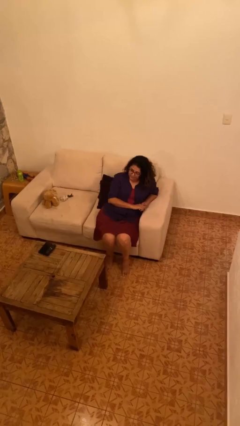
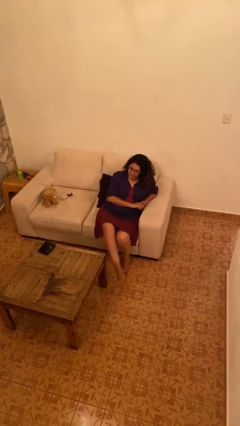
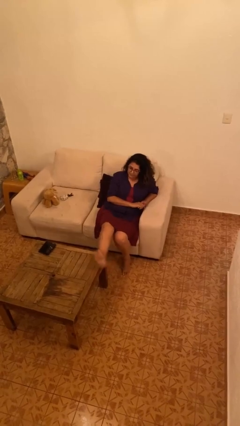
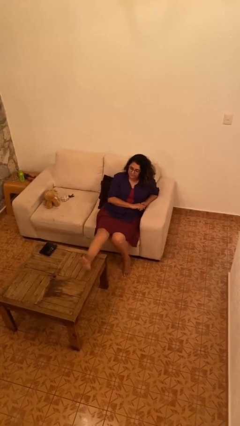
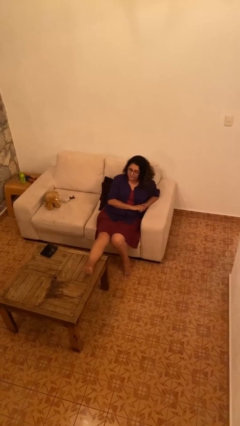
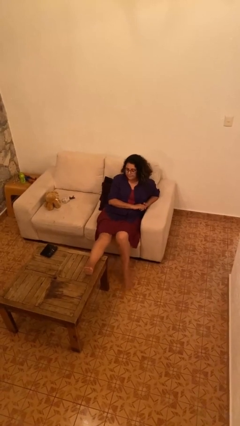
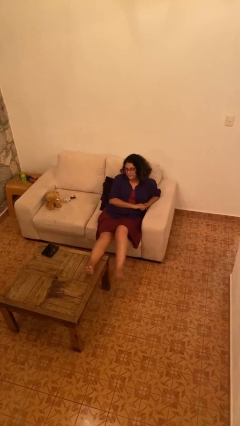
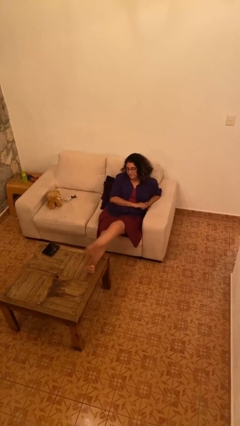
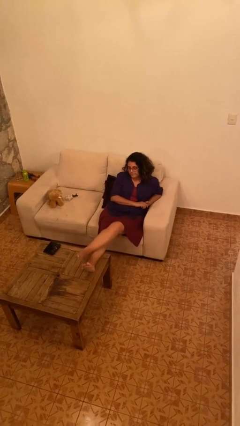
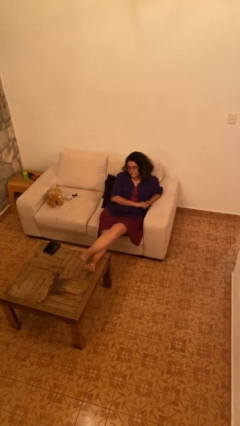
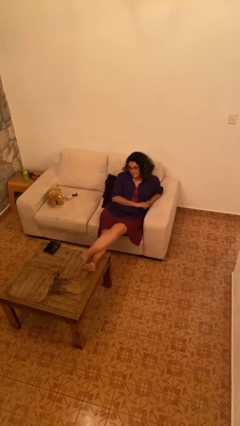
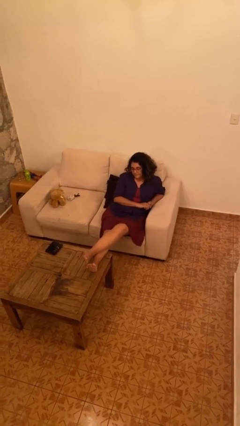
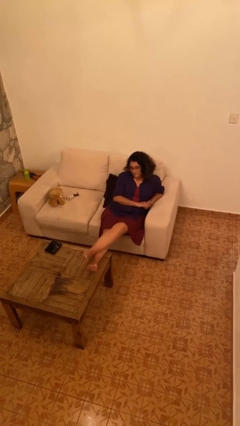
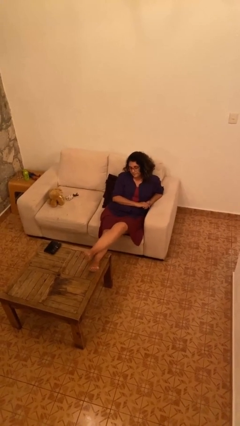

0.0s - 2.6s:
person puts feet up

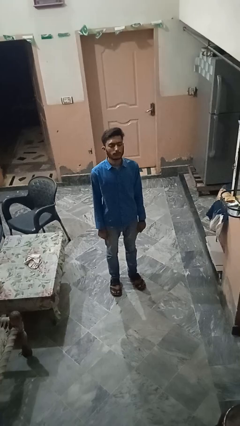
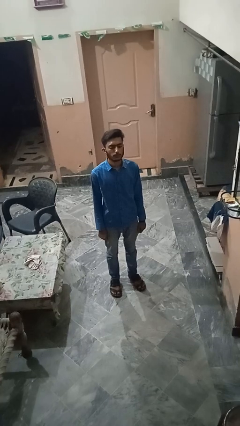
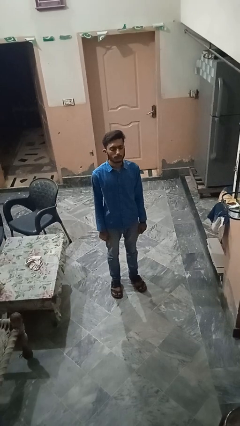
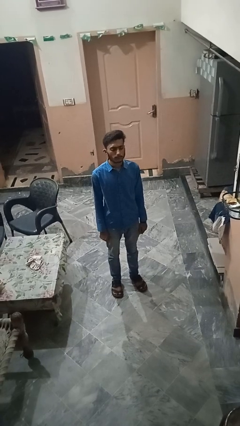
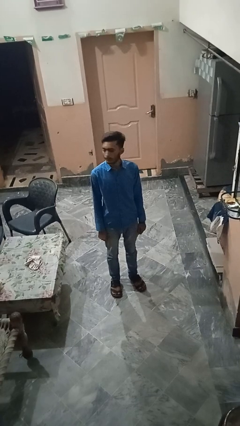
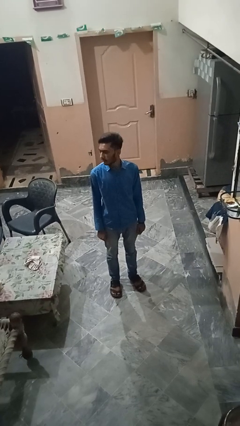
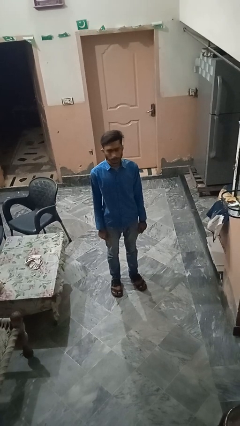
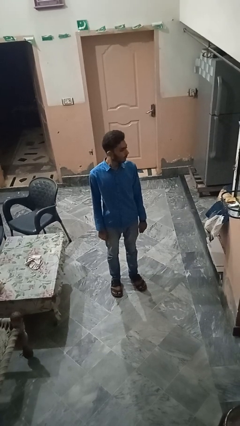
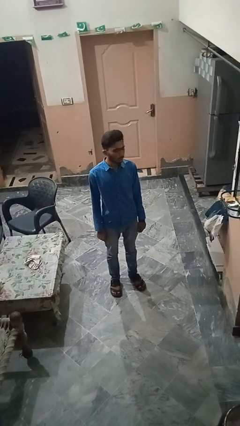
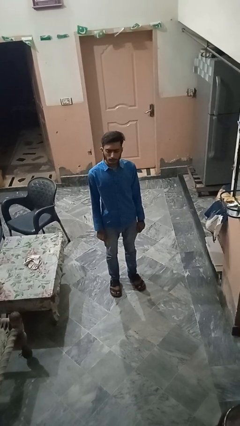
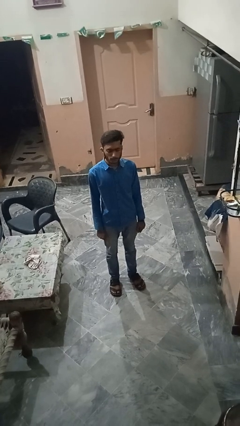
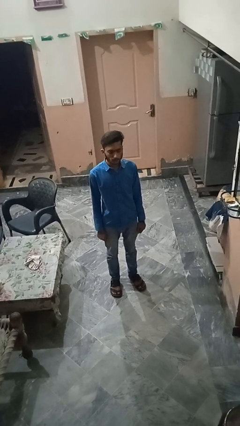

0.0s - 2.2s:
person shakes head

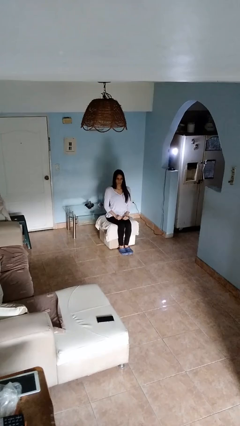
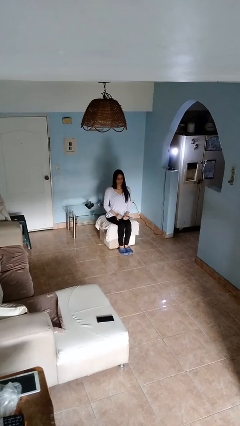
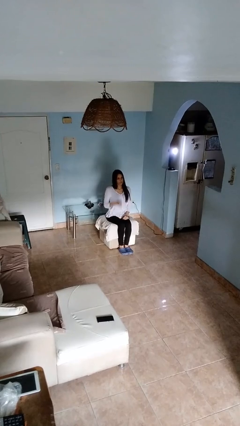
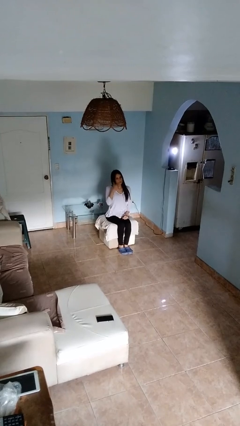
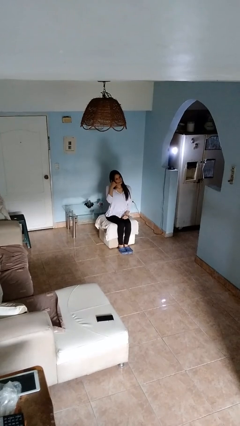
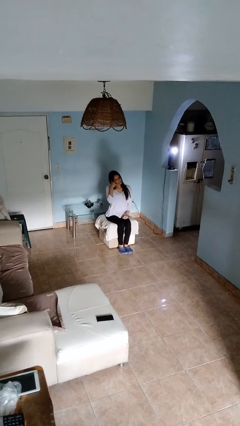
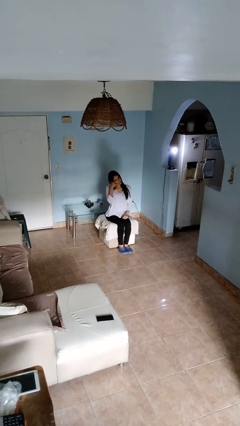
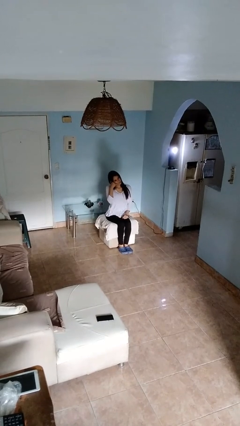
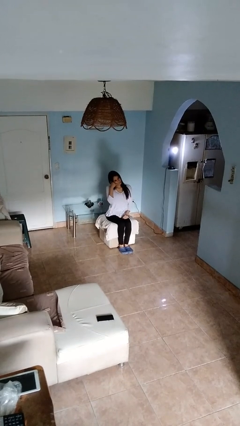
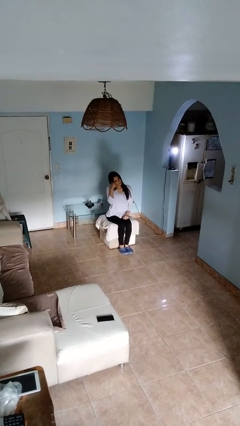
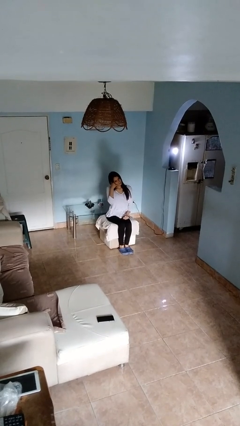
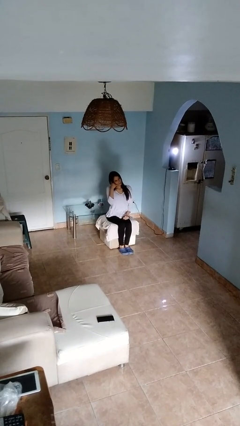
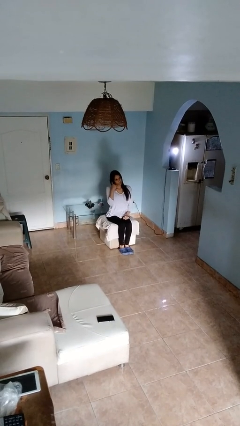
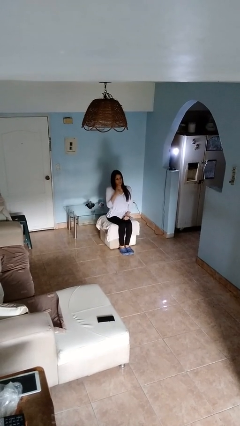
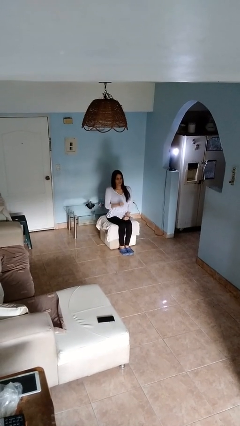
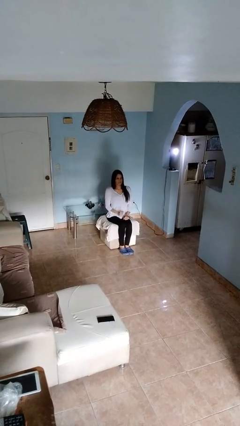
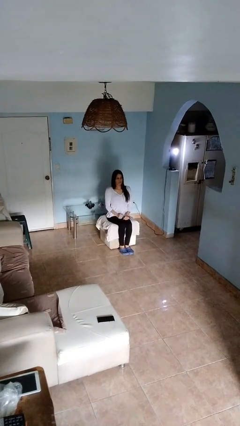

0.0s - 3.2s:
person gestures call me

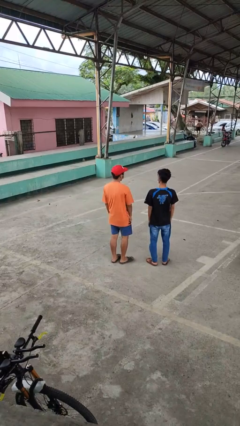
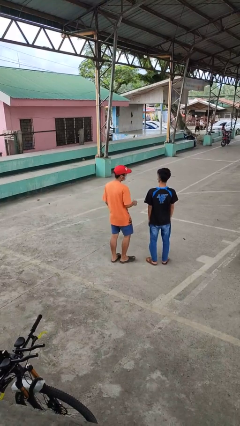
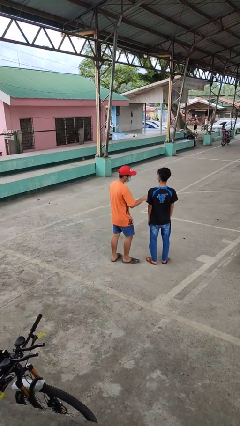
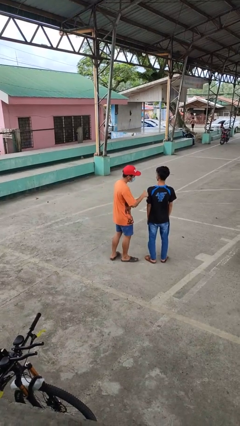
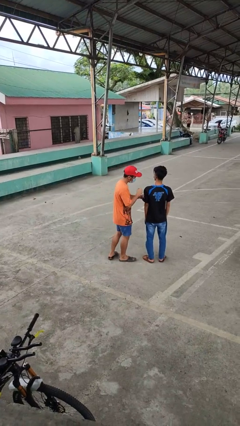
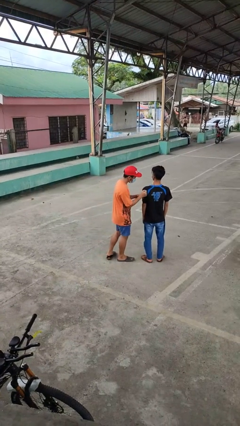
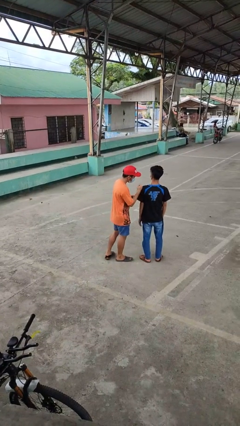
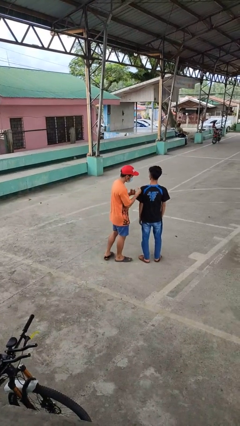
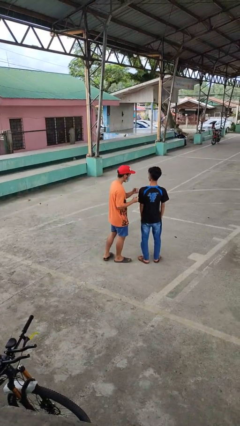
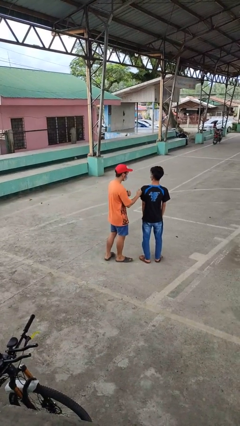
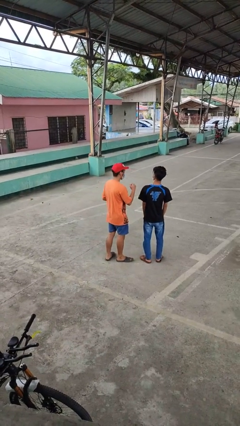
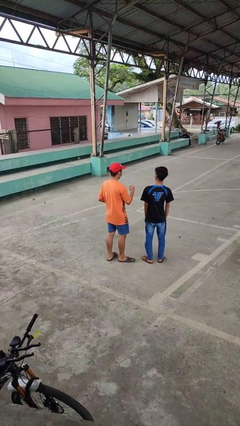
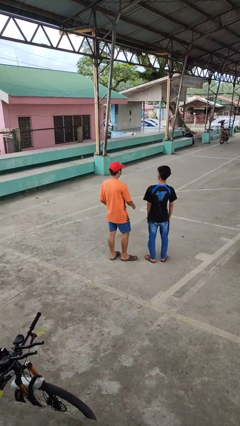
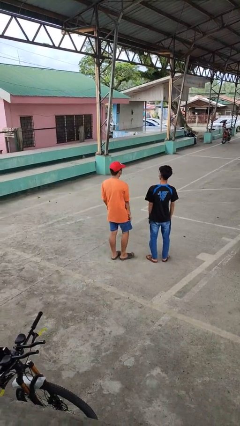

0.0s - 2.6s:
person pounds shoulders of person

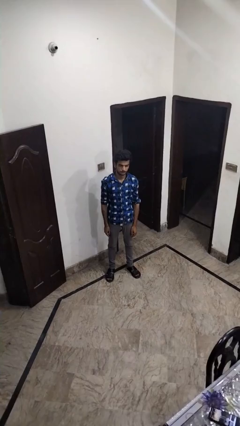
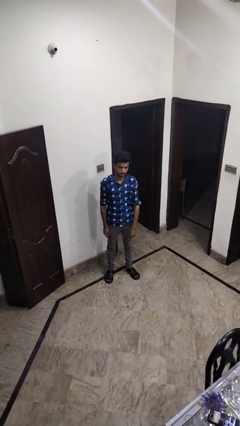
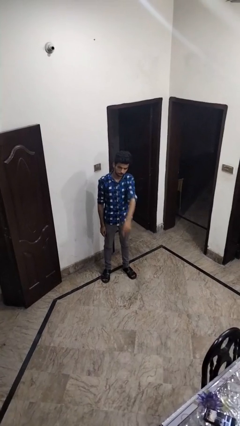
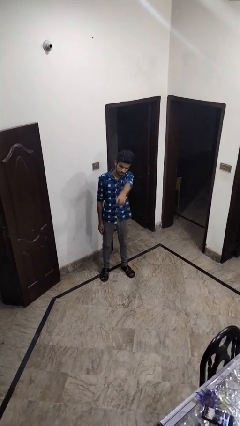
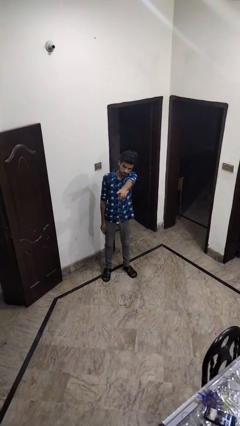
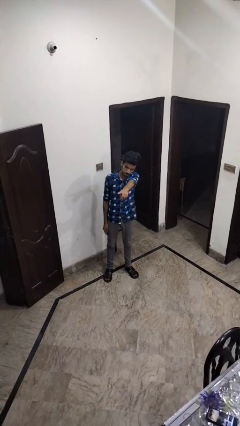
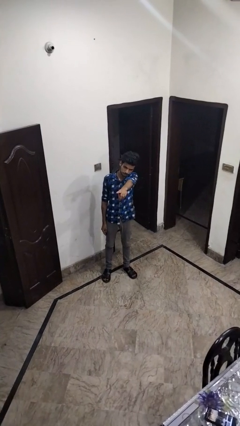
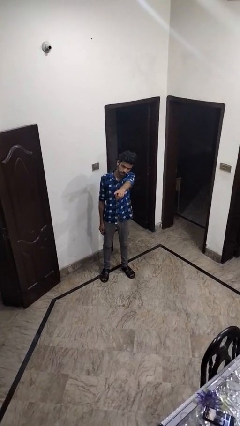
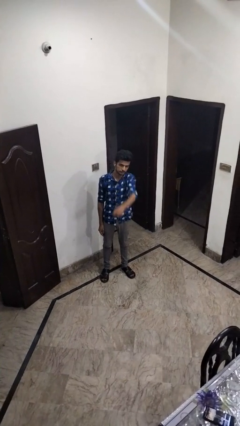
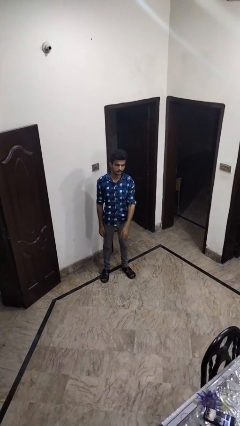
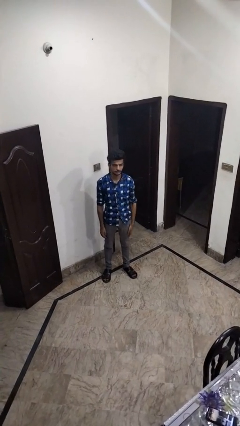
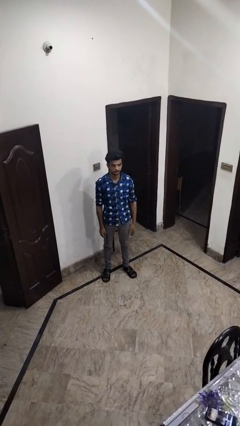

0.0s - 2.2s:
person points at person

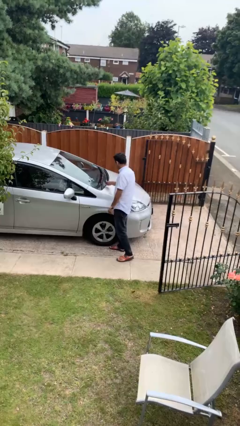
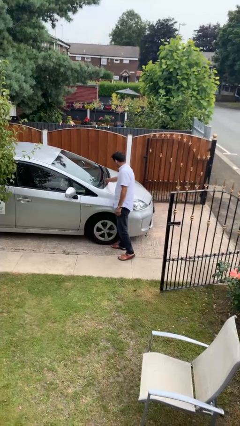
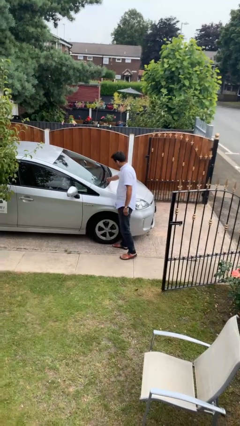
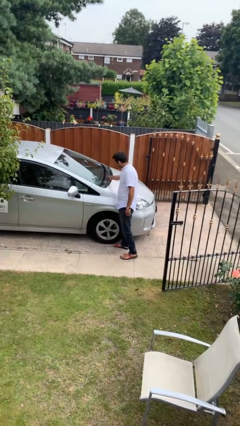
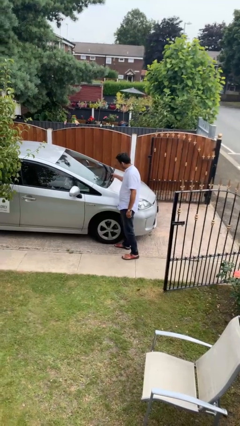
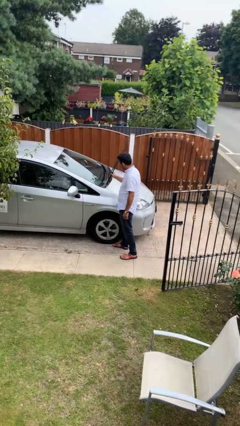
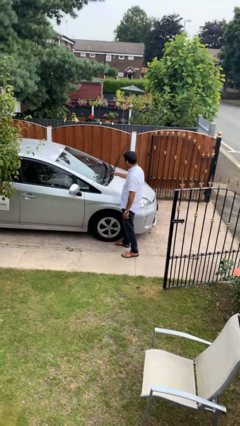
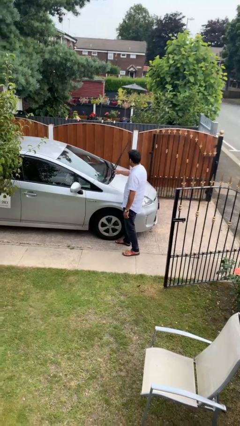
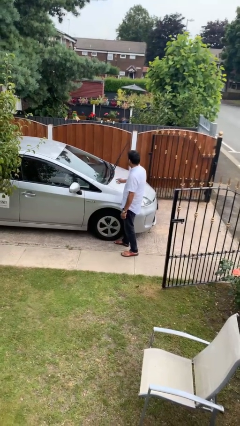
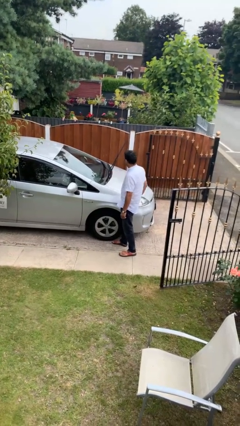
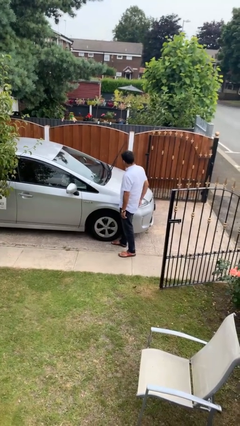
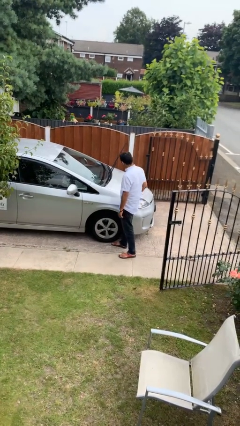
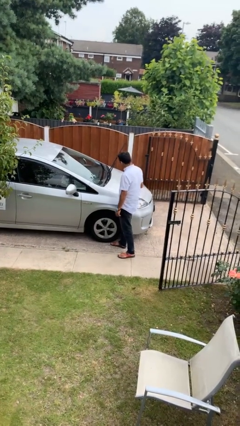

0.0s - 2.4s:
person flips up car wipers

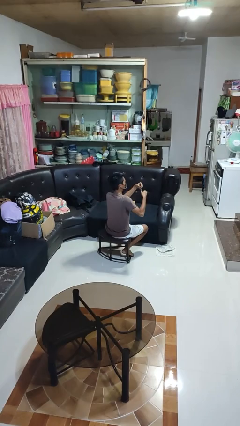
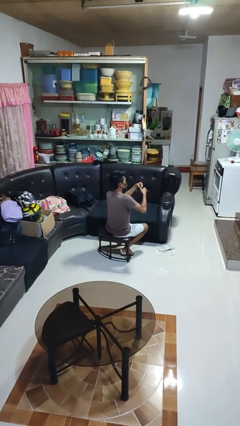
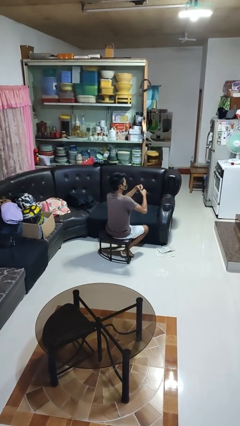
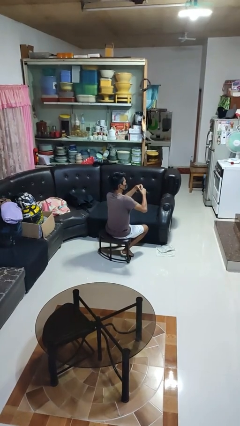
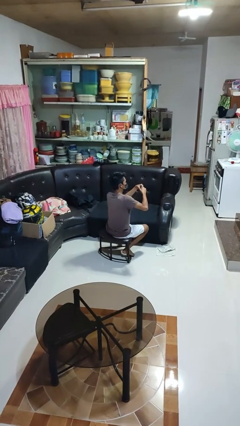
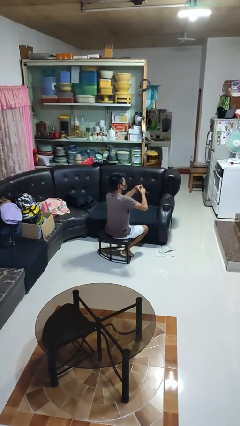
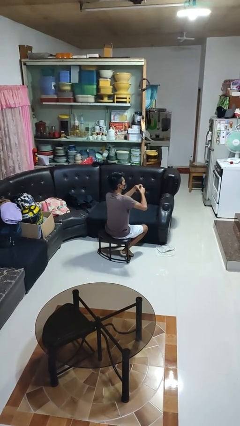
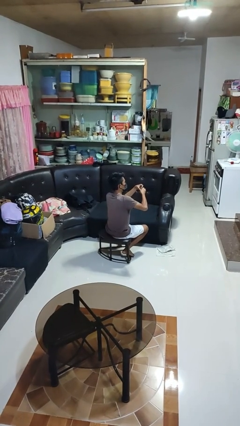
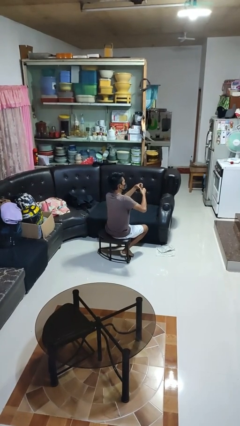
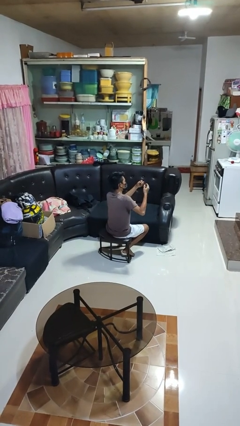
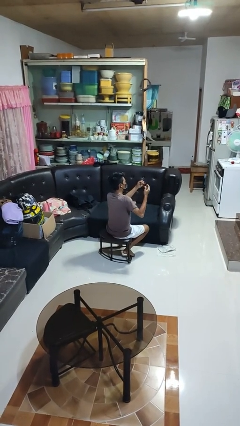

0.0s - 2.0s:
person clips fingernails
